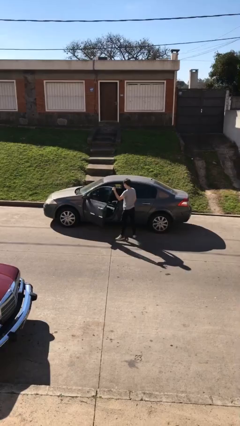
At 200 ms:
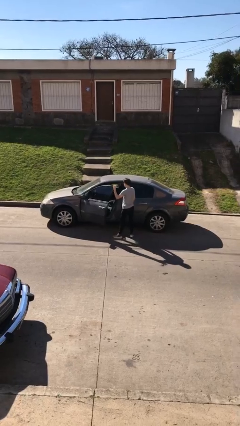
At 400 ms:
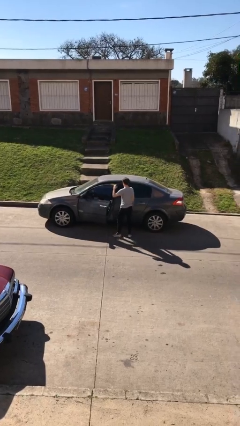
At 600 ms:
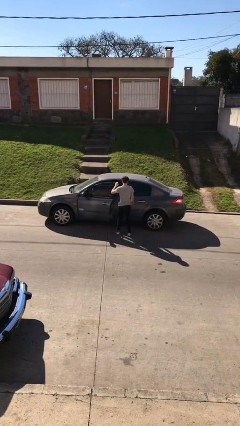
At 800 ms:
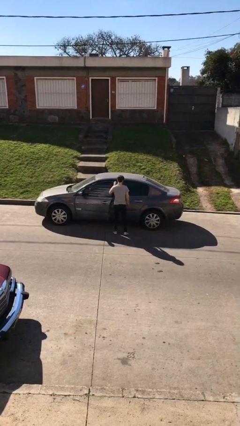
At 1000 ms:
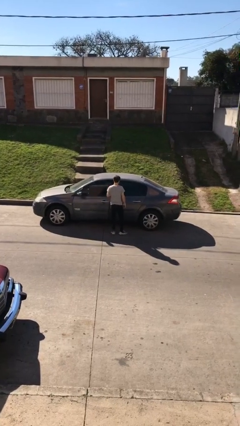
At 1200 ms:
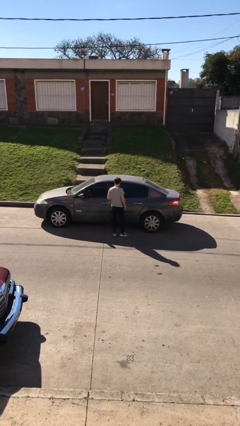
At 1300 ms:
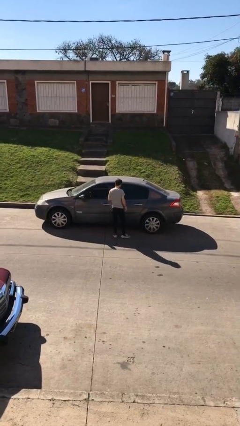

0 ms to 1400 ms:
person closes car door

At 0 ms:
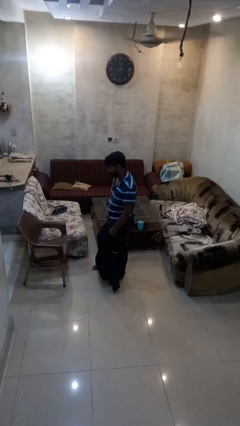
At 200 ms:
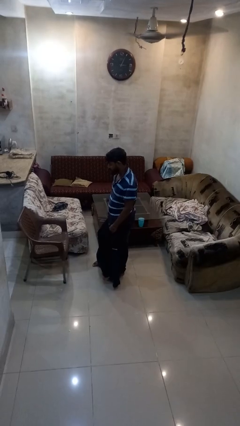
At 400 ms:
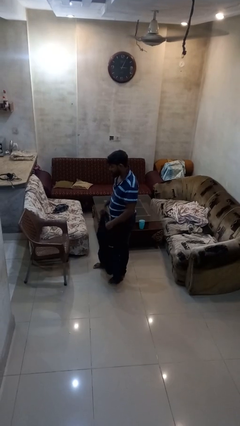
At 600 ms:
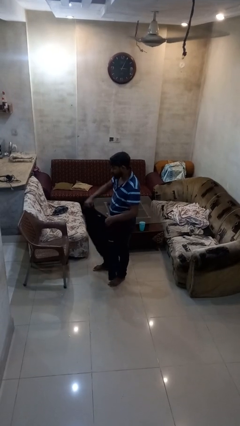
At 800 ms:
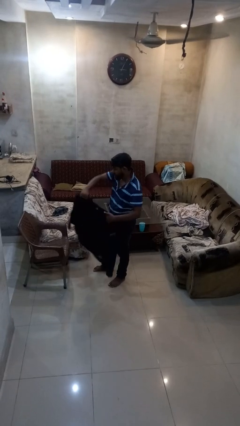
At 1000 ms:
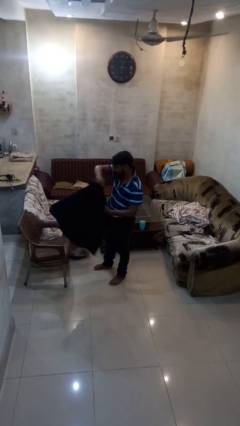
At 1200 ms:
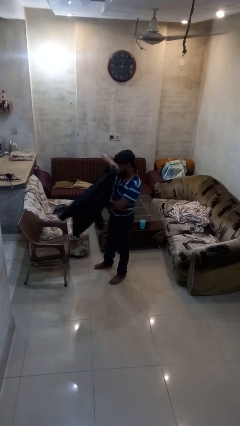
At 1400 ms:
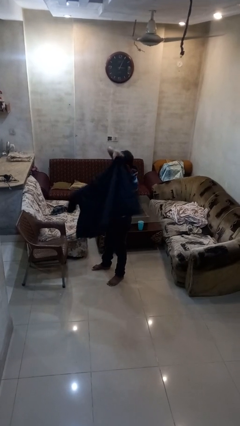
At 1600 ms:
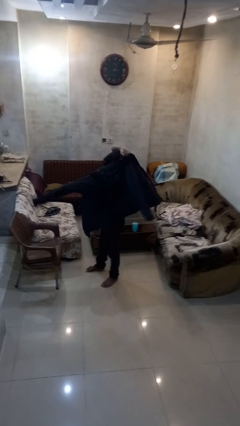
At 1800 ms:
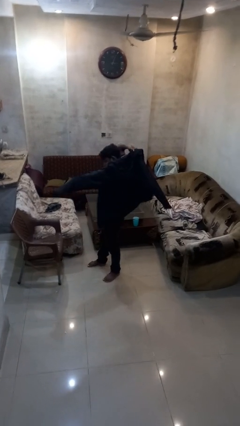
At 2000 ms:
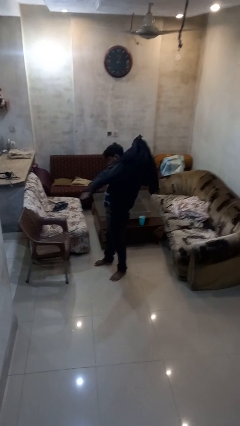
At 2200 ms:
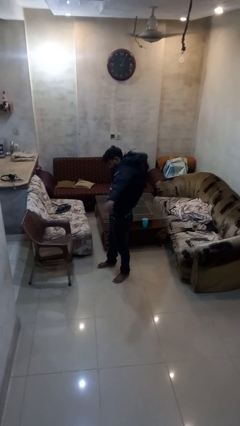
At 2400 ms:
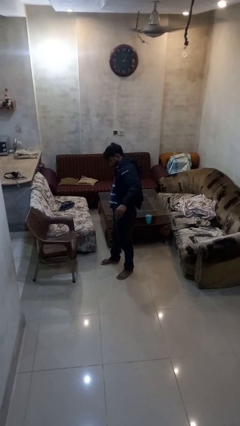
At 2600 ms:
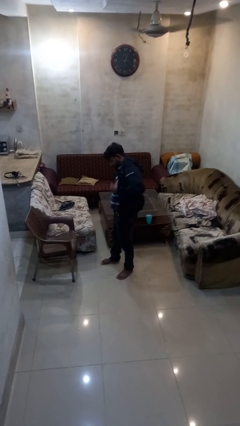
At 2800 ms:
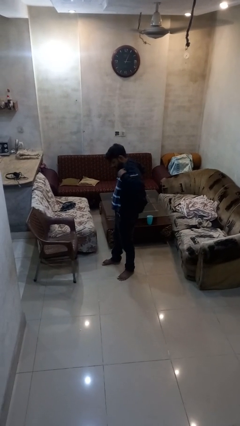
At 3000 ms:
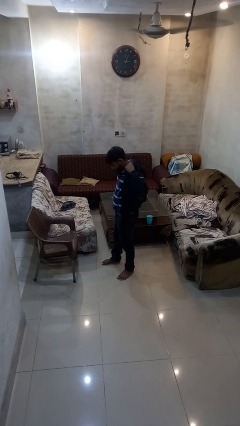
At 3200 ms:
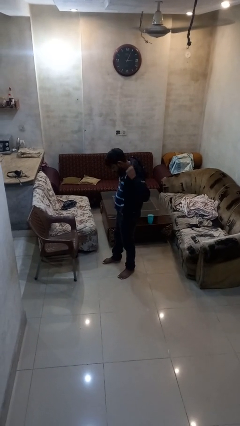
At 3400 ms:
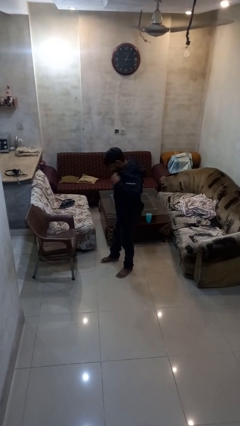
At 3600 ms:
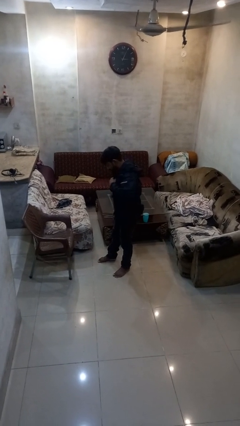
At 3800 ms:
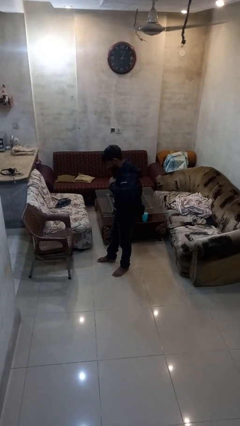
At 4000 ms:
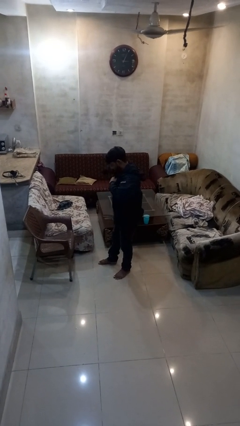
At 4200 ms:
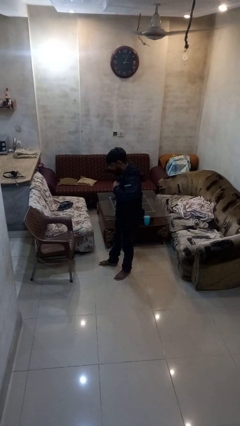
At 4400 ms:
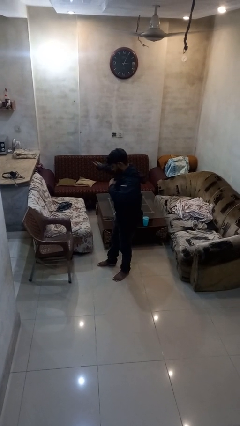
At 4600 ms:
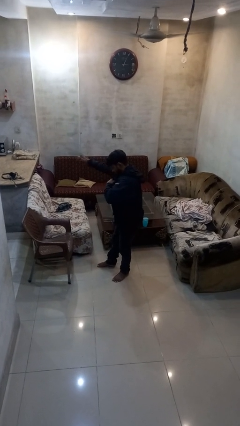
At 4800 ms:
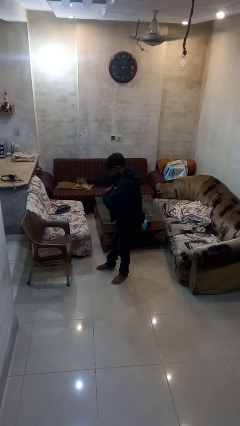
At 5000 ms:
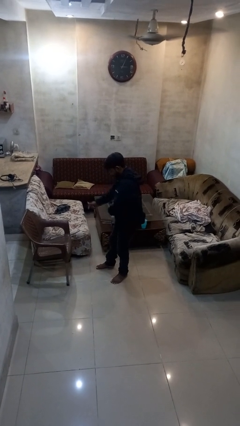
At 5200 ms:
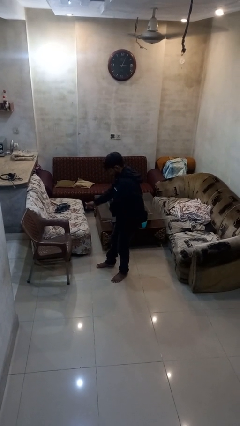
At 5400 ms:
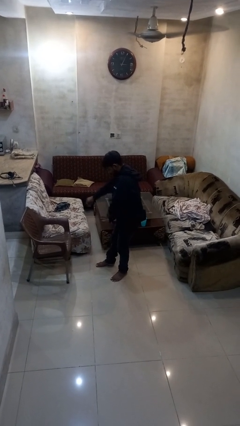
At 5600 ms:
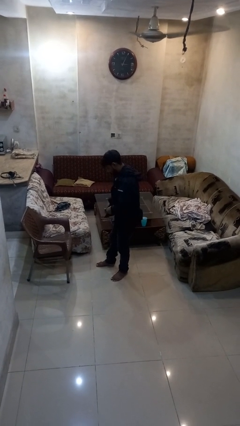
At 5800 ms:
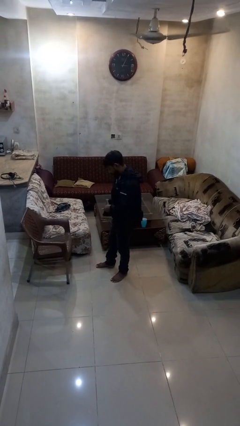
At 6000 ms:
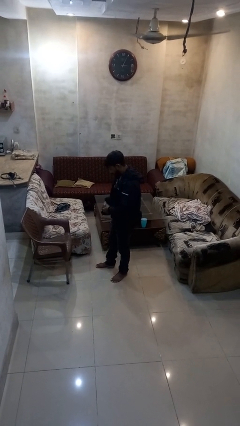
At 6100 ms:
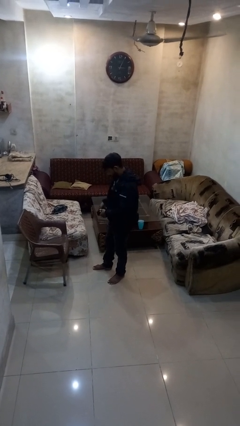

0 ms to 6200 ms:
person puts on jacket

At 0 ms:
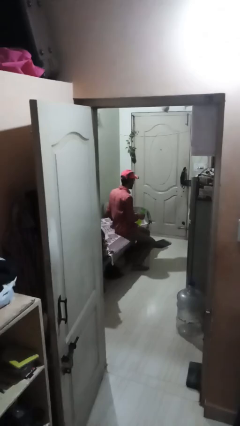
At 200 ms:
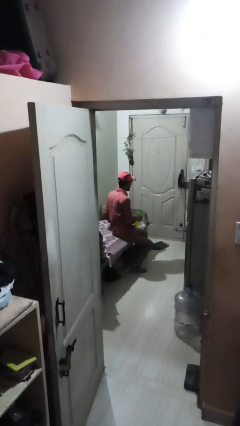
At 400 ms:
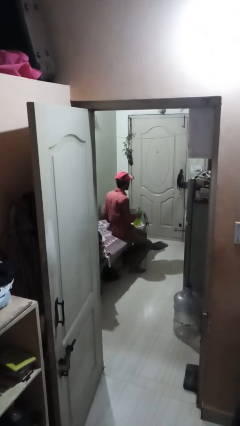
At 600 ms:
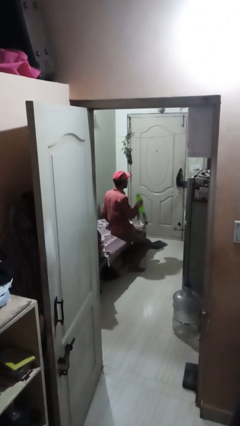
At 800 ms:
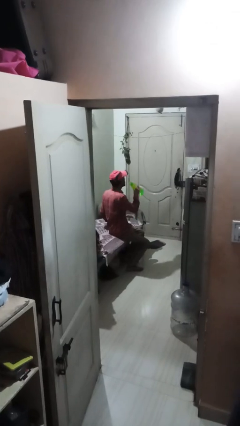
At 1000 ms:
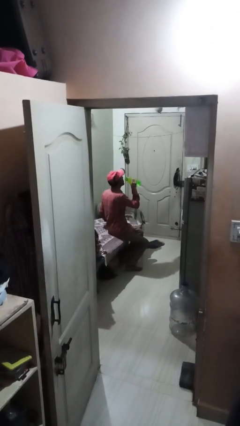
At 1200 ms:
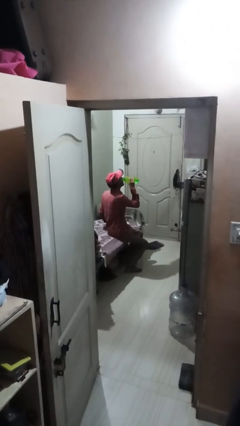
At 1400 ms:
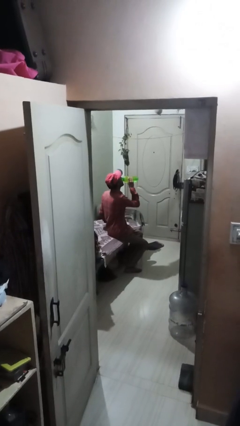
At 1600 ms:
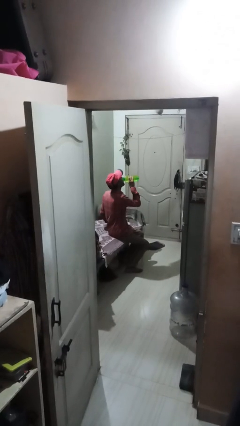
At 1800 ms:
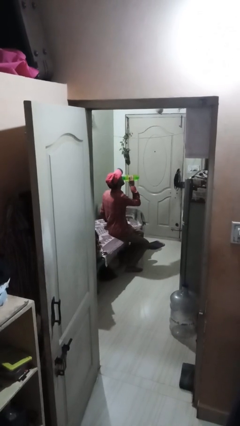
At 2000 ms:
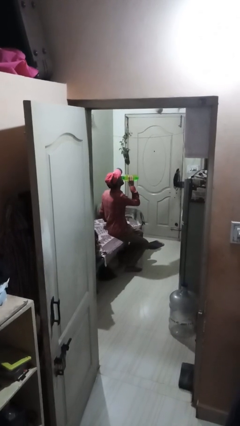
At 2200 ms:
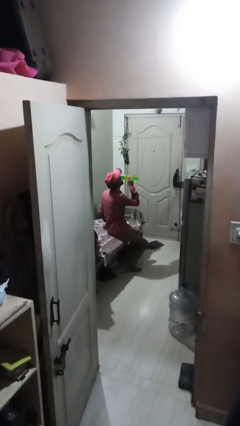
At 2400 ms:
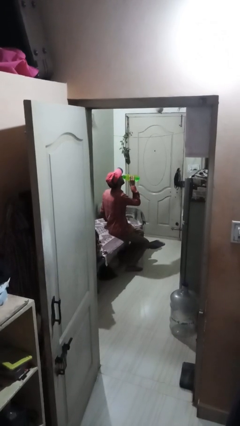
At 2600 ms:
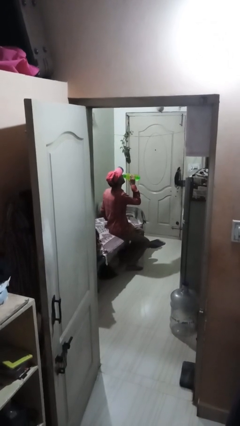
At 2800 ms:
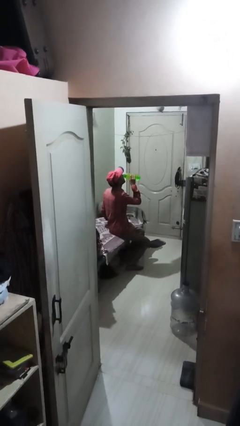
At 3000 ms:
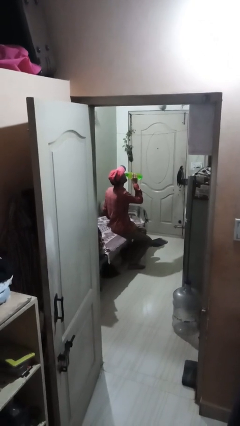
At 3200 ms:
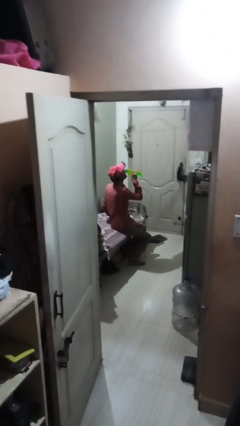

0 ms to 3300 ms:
person drinks from bottle

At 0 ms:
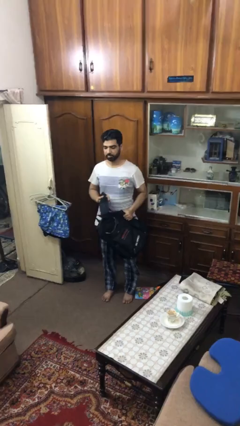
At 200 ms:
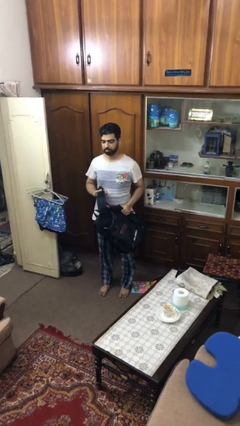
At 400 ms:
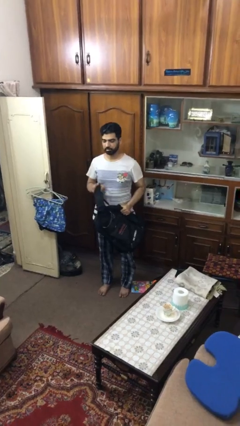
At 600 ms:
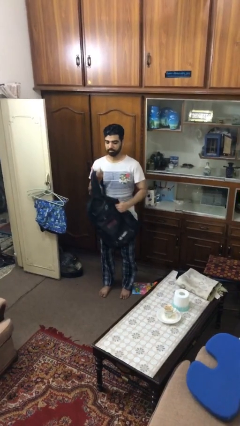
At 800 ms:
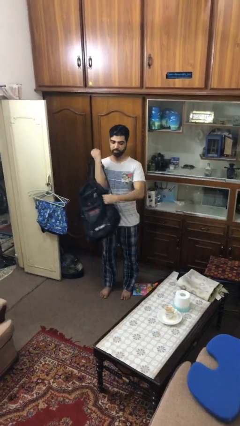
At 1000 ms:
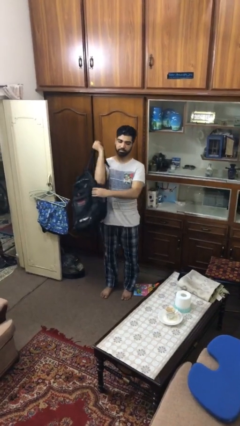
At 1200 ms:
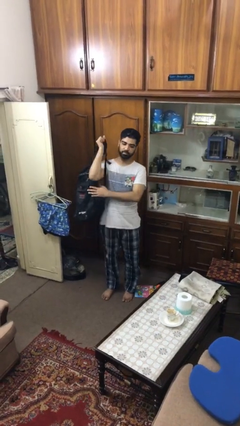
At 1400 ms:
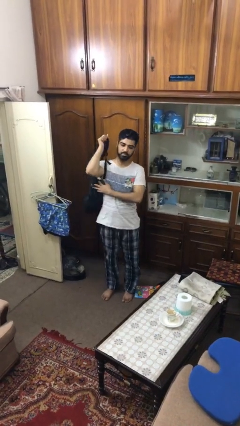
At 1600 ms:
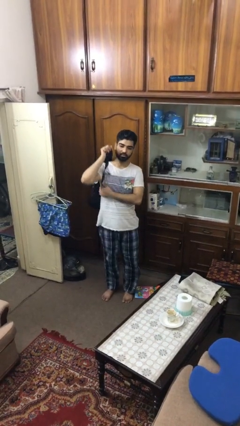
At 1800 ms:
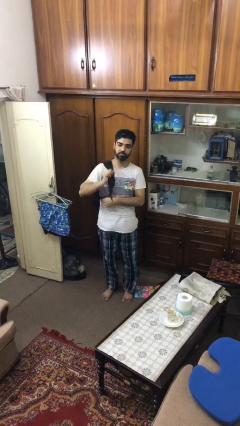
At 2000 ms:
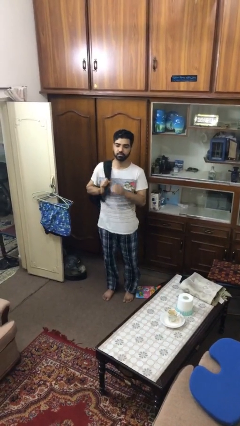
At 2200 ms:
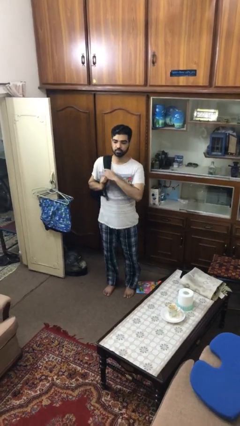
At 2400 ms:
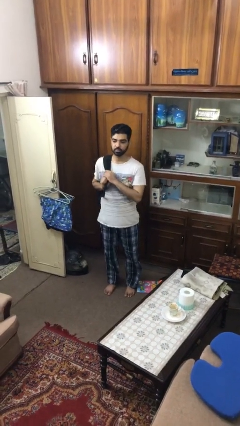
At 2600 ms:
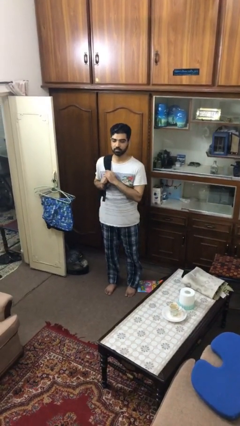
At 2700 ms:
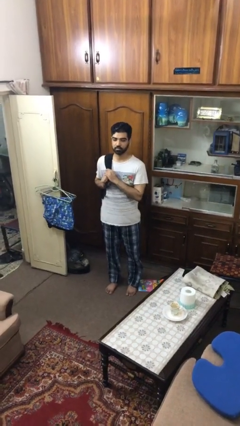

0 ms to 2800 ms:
person puts on backpack

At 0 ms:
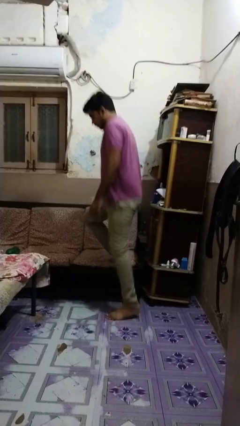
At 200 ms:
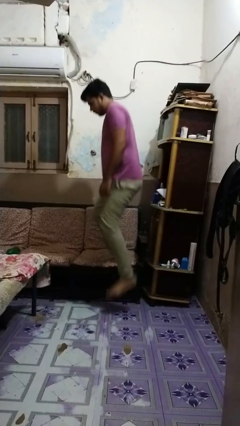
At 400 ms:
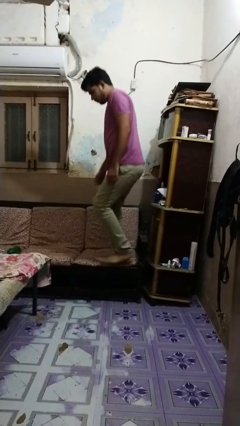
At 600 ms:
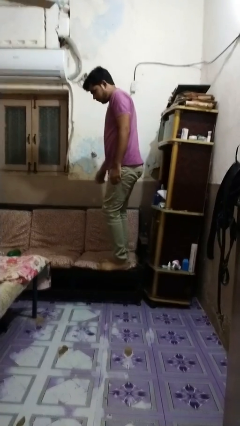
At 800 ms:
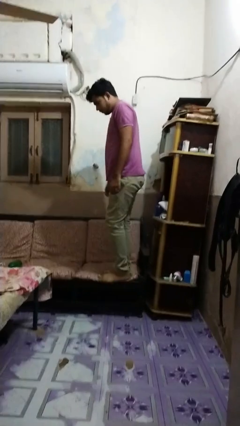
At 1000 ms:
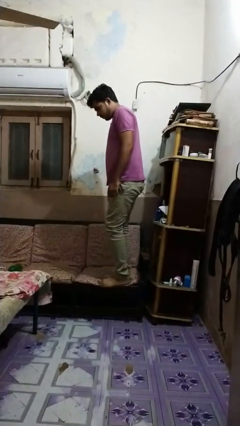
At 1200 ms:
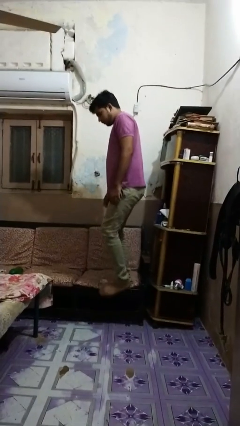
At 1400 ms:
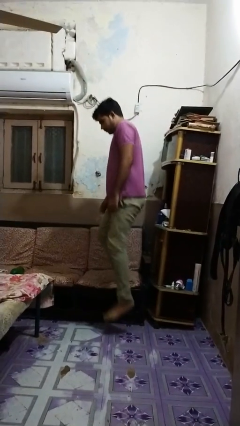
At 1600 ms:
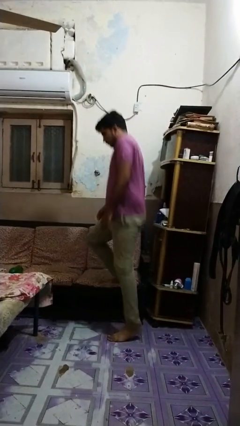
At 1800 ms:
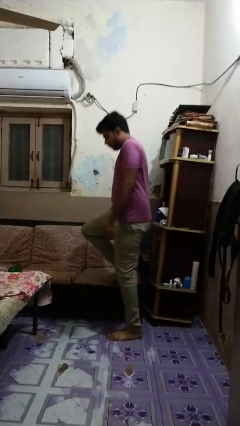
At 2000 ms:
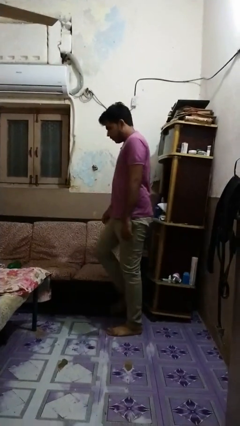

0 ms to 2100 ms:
person climbs on couch

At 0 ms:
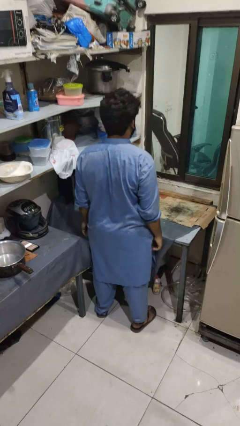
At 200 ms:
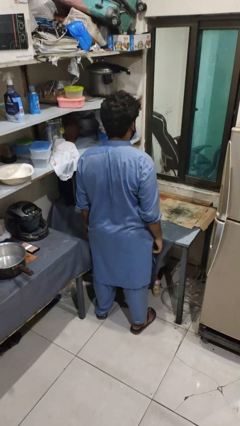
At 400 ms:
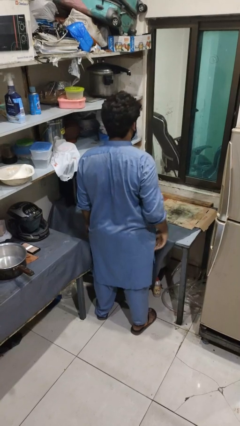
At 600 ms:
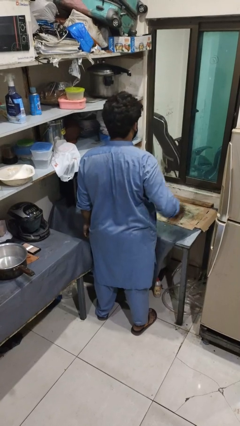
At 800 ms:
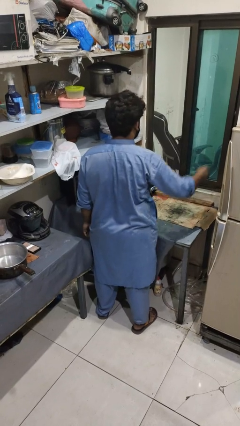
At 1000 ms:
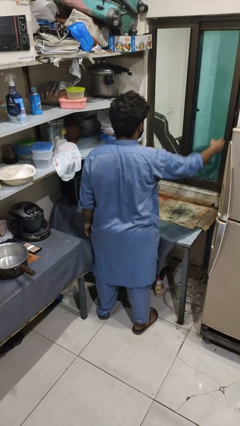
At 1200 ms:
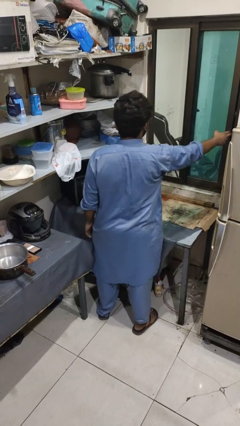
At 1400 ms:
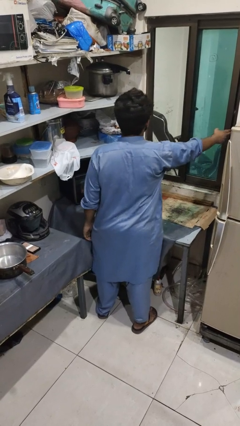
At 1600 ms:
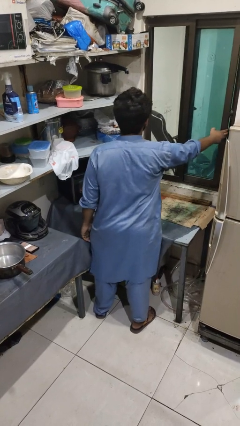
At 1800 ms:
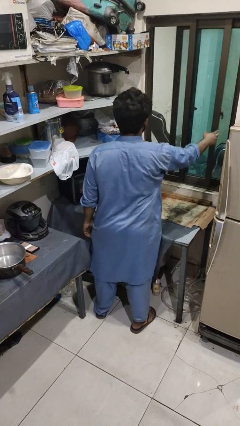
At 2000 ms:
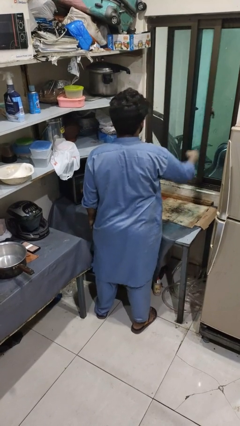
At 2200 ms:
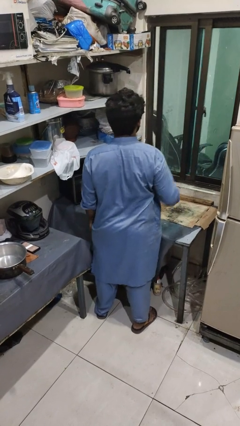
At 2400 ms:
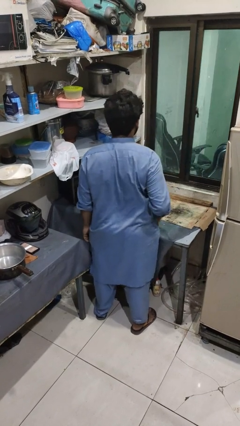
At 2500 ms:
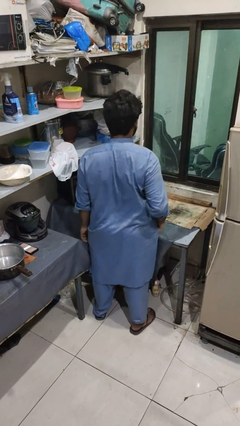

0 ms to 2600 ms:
person closes home window
